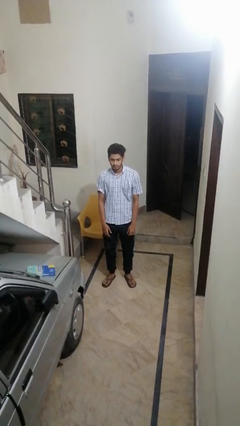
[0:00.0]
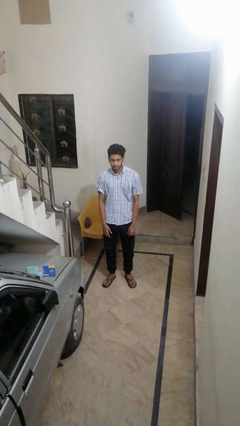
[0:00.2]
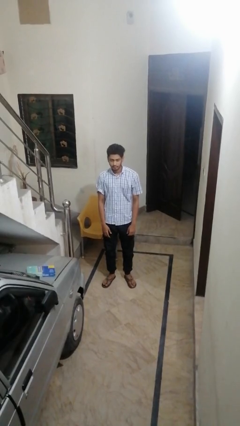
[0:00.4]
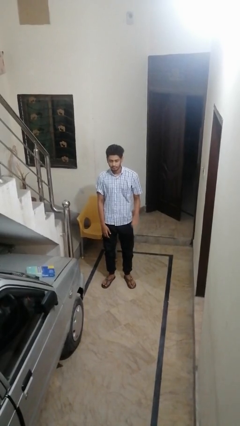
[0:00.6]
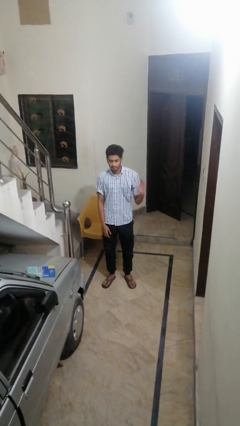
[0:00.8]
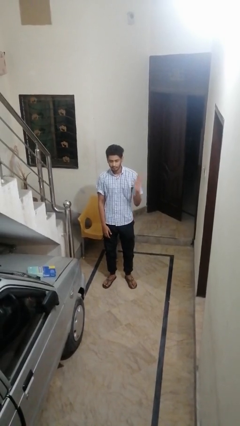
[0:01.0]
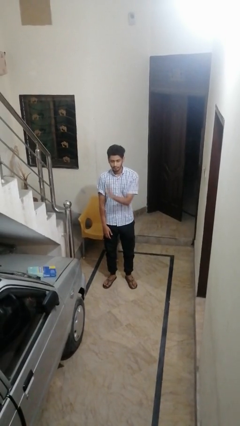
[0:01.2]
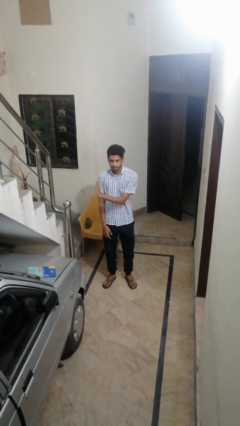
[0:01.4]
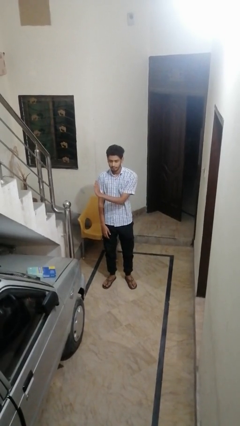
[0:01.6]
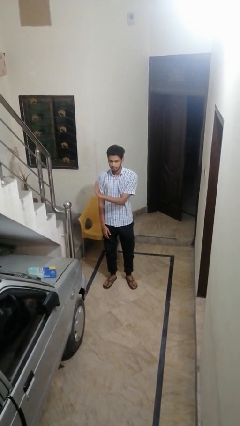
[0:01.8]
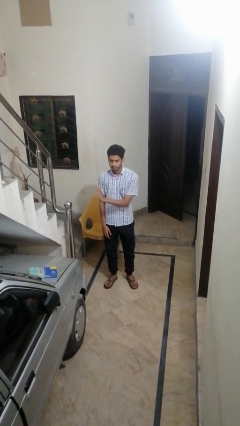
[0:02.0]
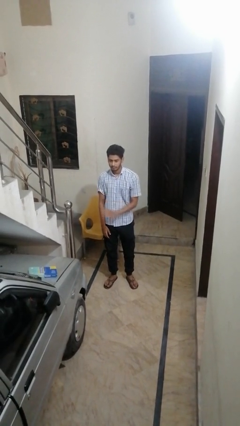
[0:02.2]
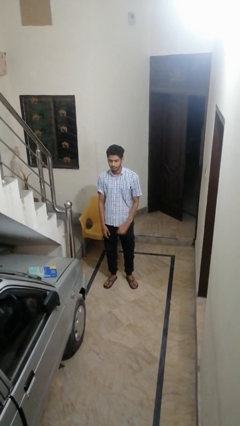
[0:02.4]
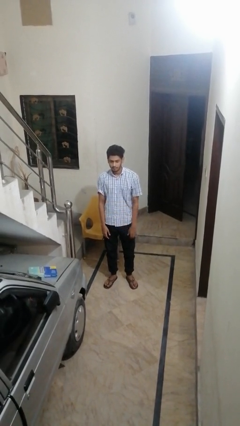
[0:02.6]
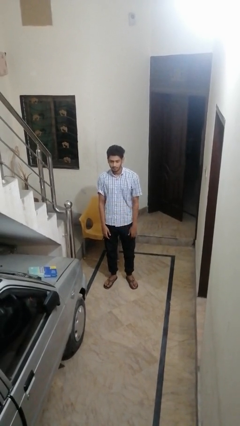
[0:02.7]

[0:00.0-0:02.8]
person gestures swipe right

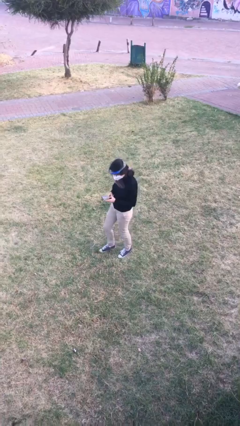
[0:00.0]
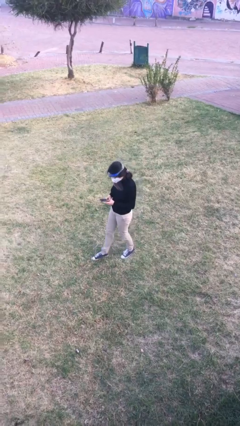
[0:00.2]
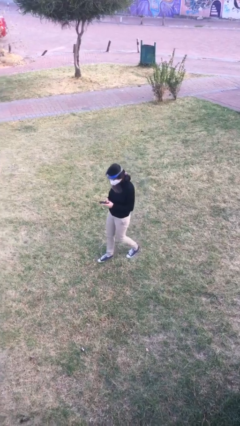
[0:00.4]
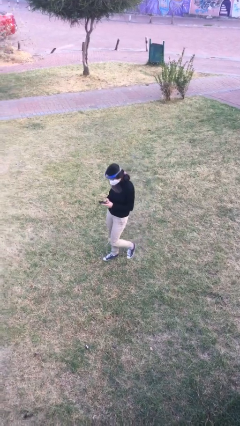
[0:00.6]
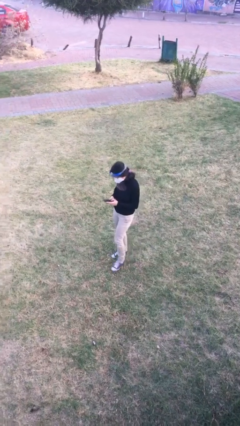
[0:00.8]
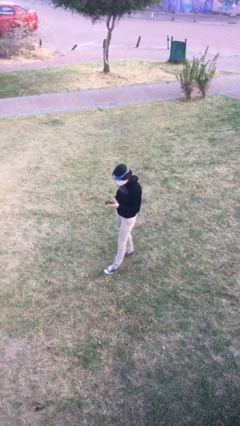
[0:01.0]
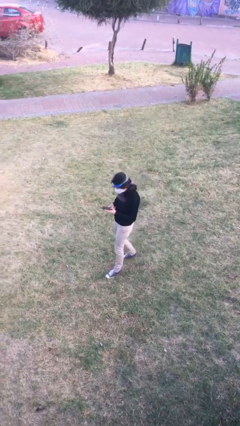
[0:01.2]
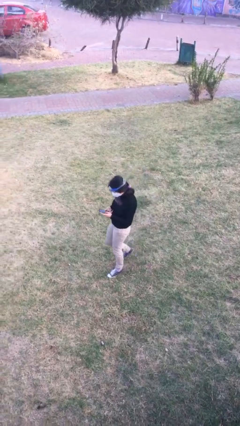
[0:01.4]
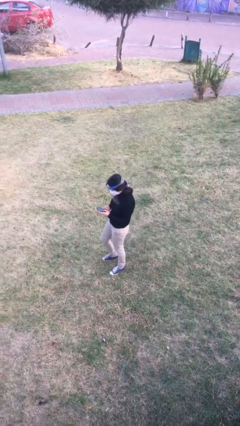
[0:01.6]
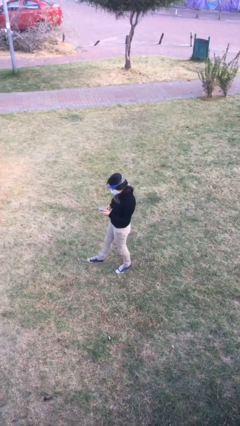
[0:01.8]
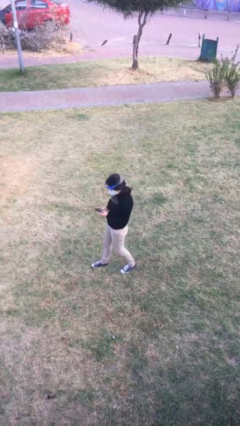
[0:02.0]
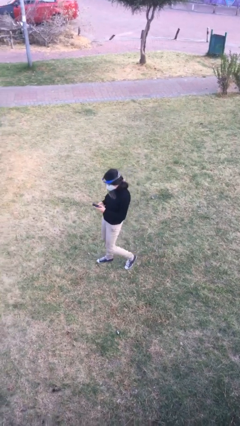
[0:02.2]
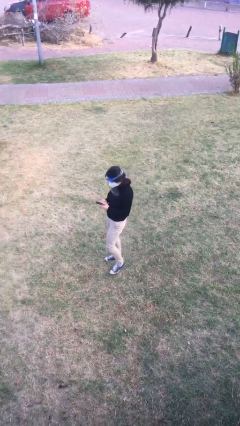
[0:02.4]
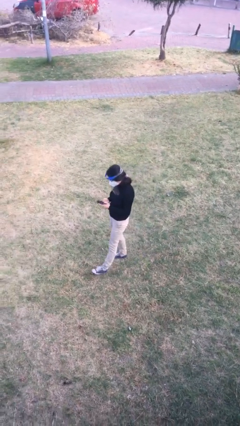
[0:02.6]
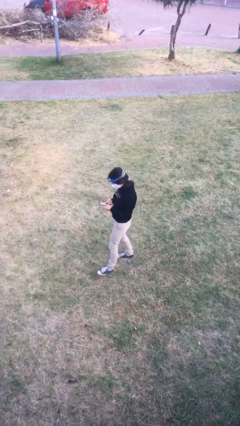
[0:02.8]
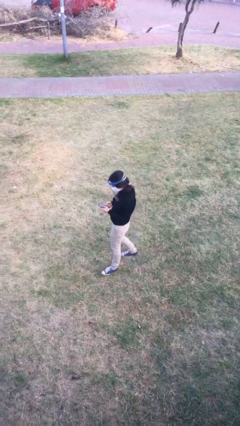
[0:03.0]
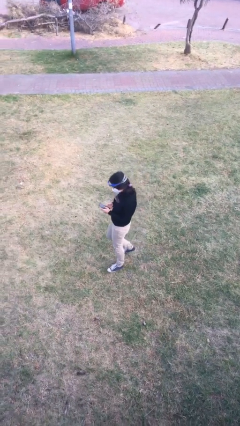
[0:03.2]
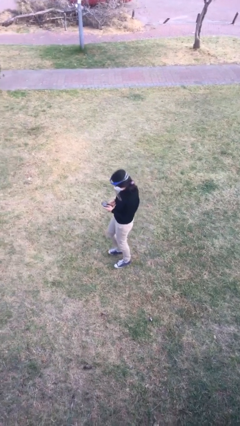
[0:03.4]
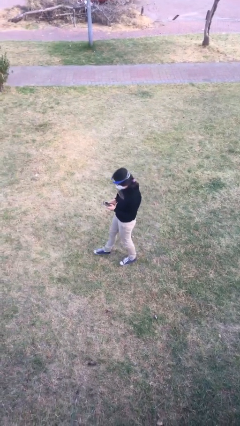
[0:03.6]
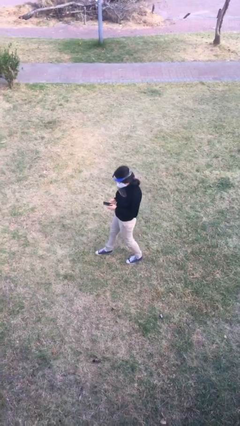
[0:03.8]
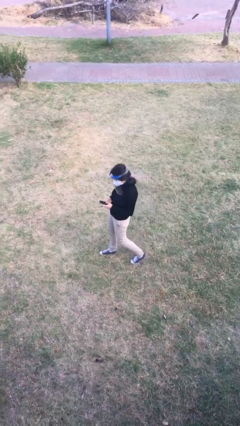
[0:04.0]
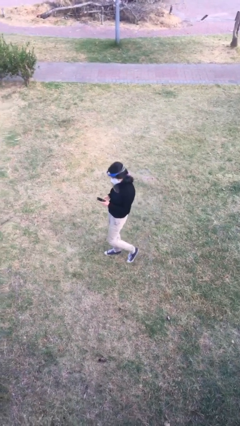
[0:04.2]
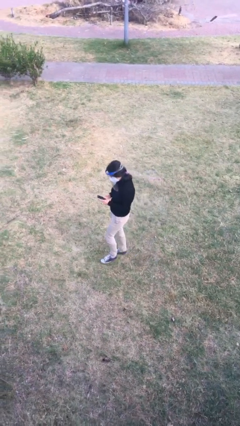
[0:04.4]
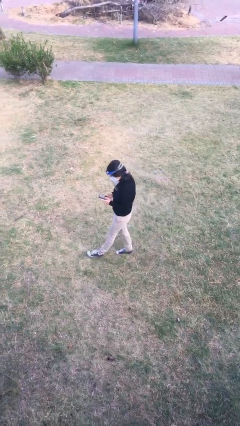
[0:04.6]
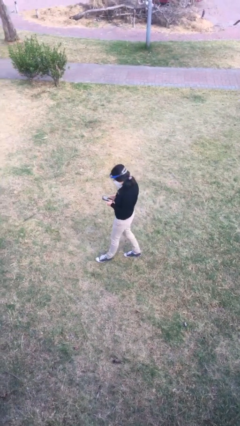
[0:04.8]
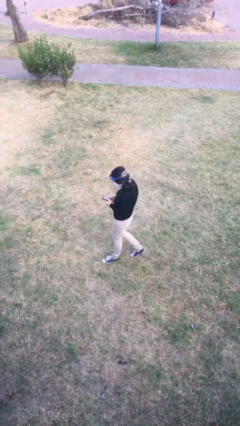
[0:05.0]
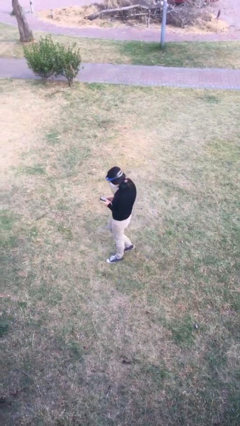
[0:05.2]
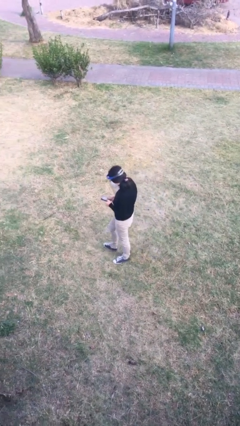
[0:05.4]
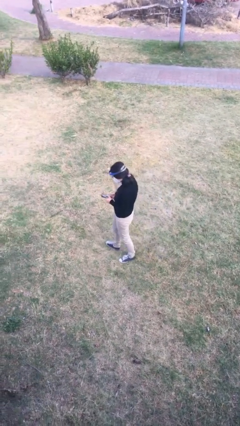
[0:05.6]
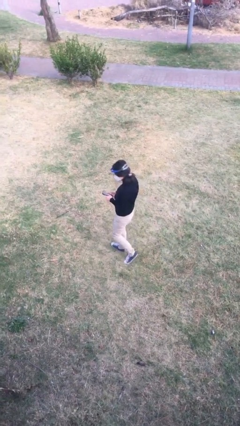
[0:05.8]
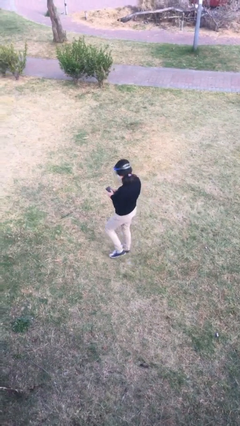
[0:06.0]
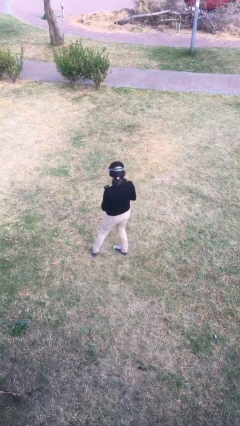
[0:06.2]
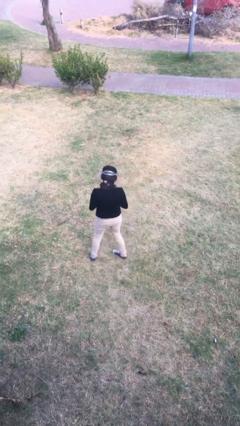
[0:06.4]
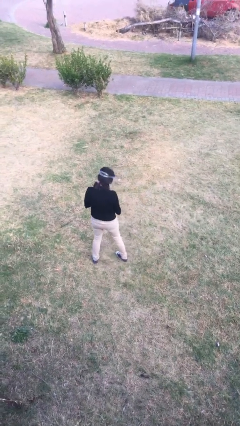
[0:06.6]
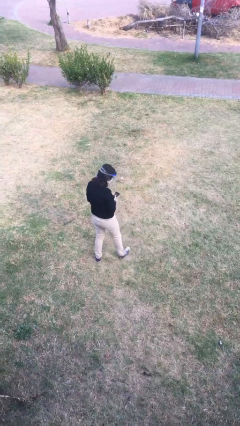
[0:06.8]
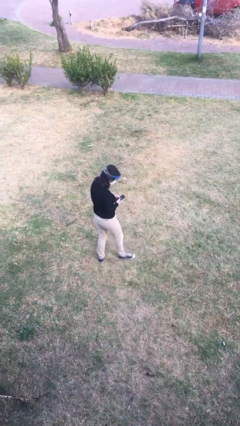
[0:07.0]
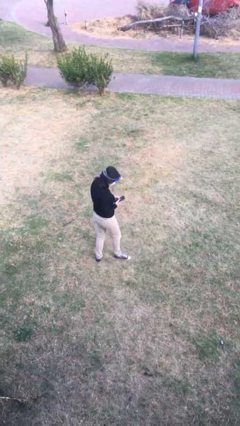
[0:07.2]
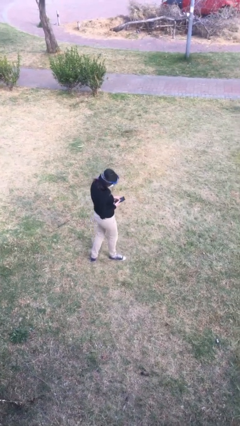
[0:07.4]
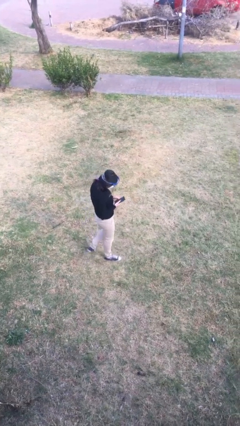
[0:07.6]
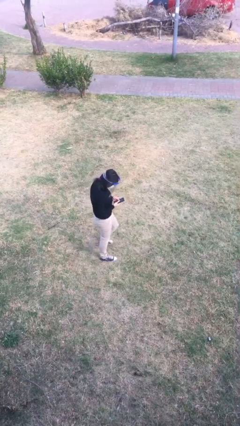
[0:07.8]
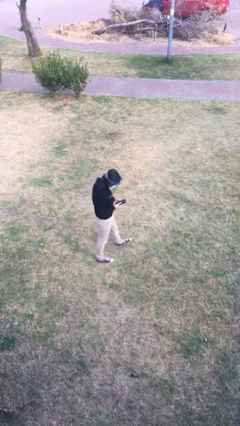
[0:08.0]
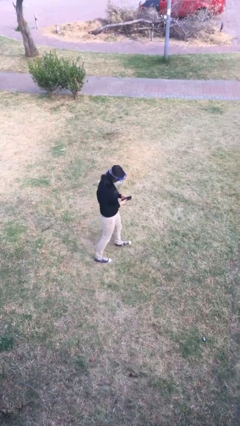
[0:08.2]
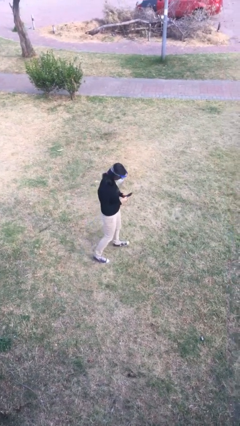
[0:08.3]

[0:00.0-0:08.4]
person texts on phone

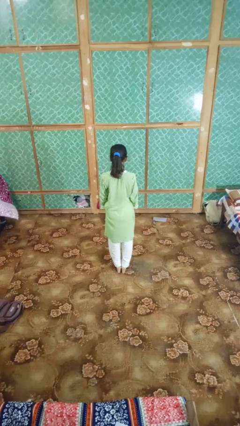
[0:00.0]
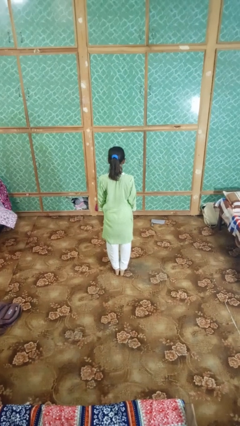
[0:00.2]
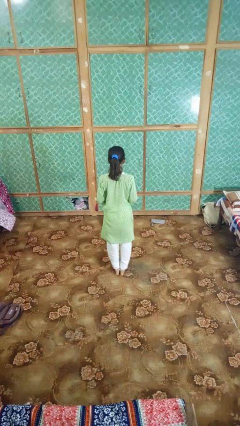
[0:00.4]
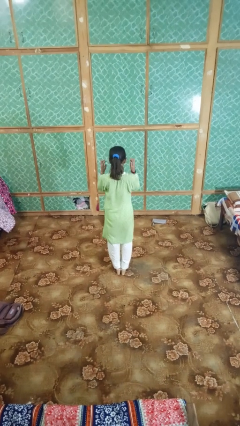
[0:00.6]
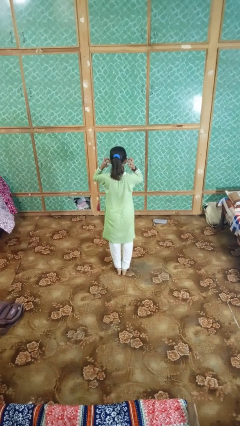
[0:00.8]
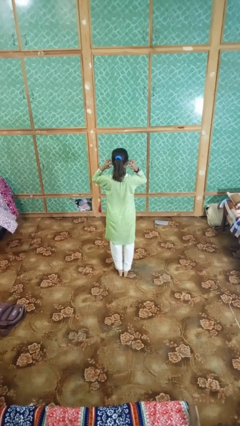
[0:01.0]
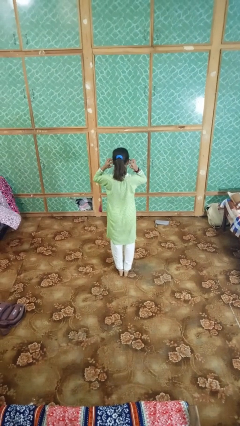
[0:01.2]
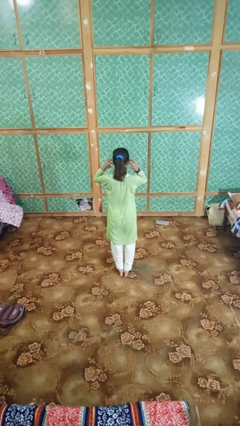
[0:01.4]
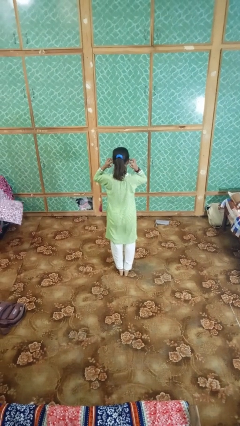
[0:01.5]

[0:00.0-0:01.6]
person puts fingers in ear

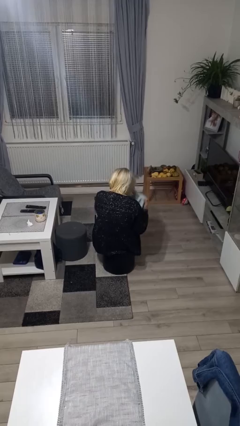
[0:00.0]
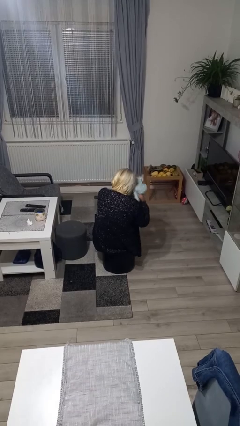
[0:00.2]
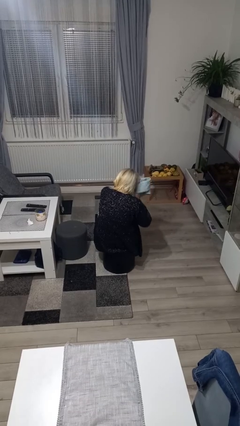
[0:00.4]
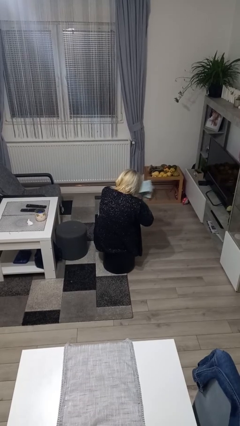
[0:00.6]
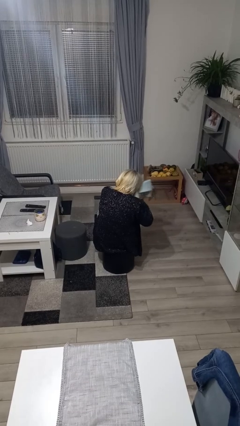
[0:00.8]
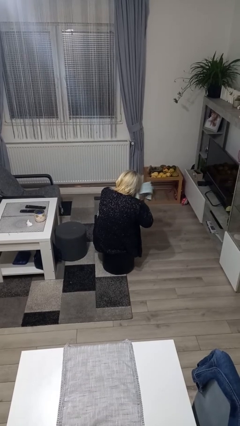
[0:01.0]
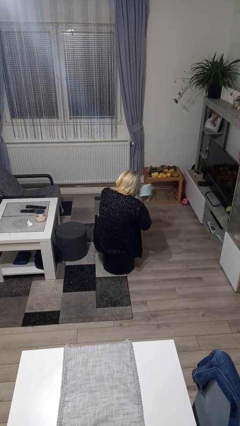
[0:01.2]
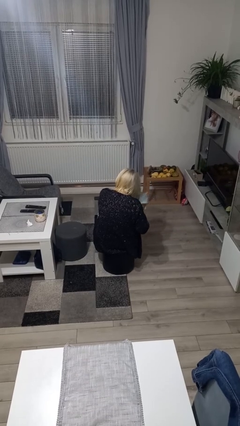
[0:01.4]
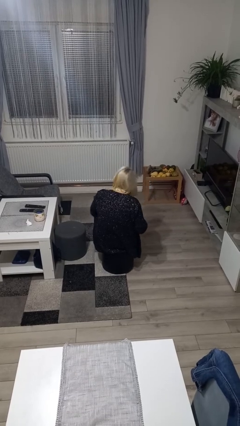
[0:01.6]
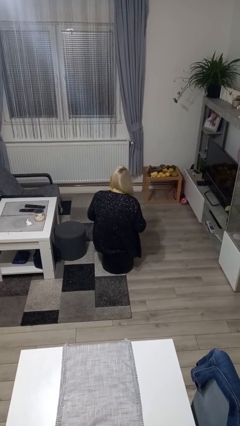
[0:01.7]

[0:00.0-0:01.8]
person dries hair with towel

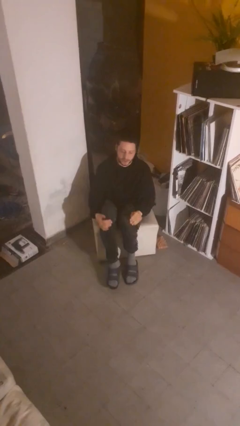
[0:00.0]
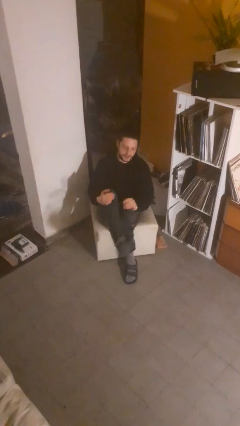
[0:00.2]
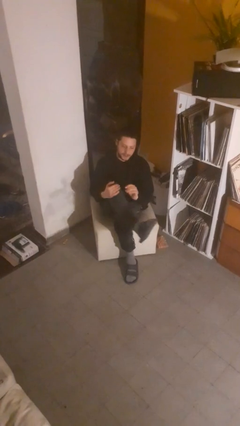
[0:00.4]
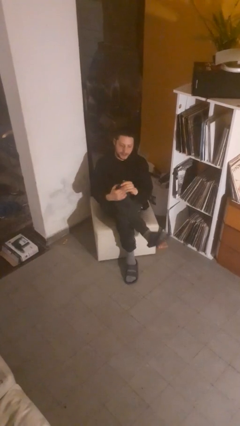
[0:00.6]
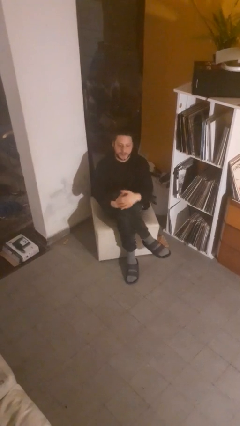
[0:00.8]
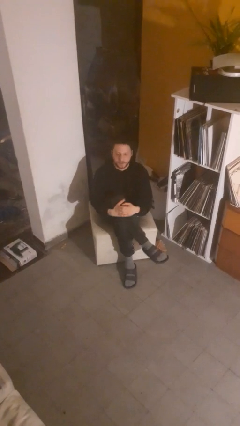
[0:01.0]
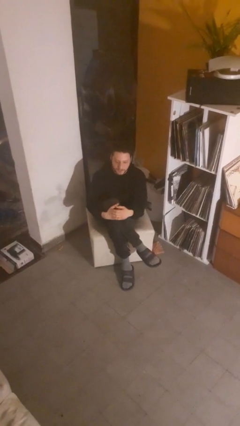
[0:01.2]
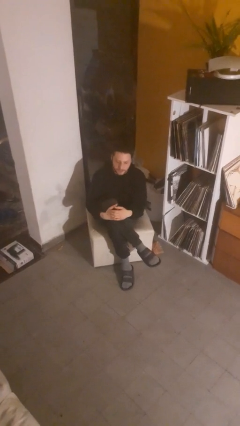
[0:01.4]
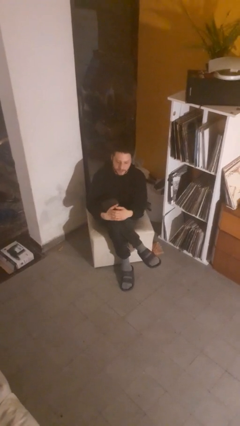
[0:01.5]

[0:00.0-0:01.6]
person crosses legs

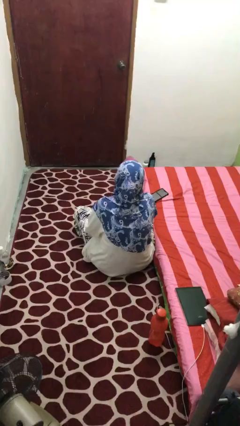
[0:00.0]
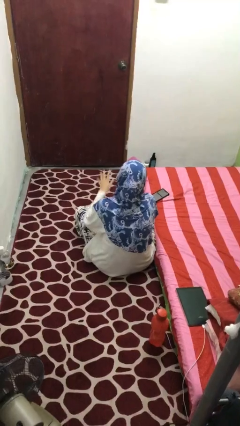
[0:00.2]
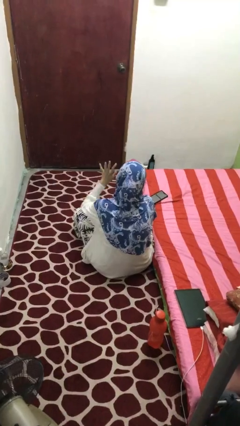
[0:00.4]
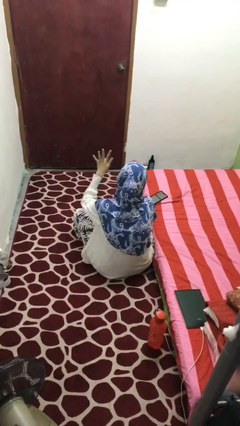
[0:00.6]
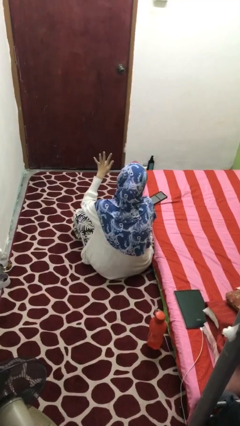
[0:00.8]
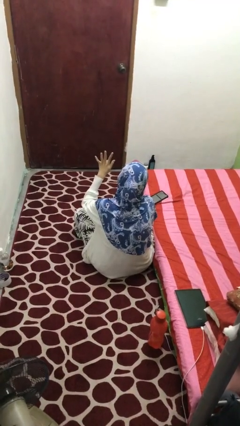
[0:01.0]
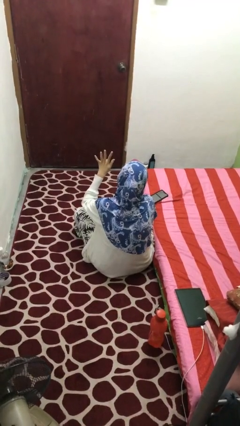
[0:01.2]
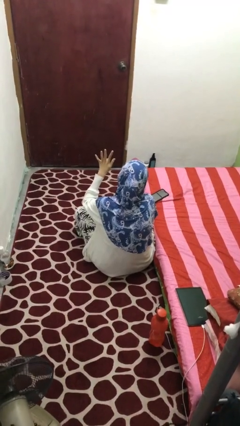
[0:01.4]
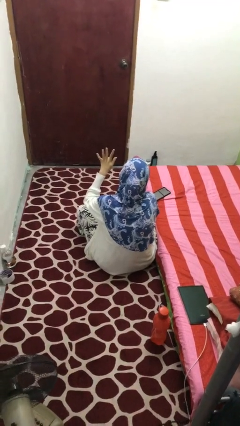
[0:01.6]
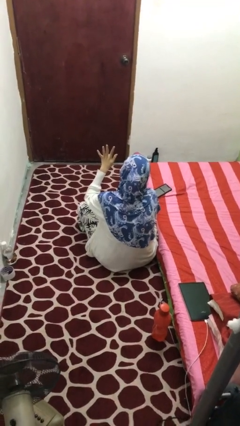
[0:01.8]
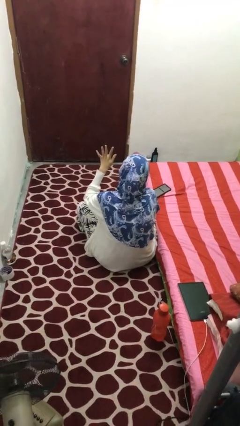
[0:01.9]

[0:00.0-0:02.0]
person gestures number five
